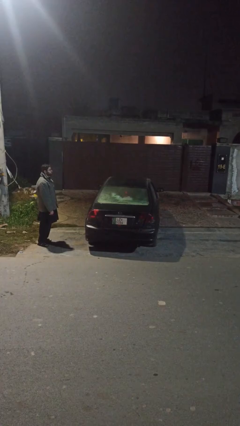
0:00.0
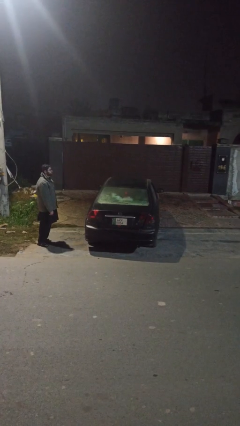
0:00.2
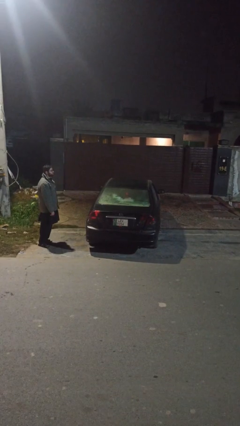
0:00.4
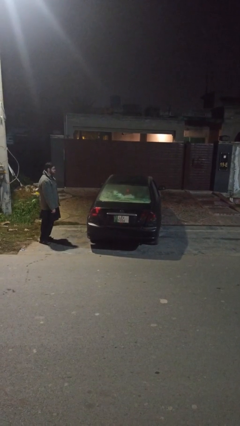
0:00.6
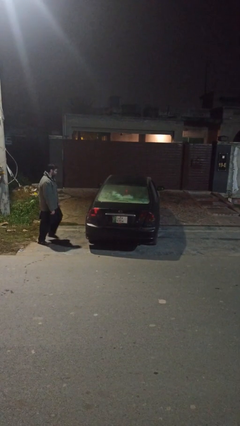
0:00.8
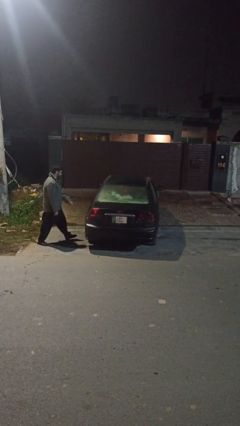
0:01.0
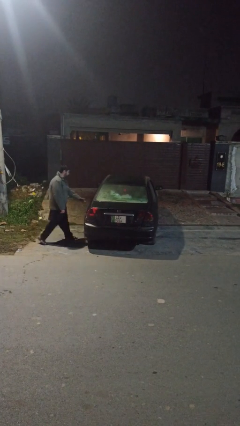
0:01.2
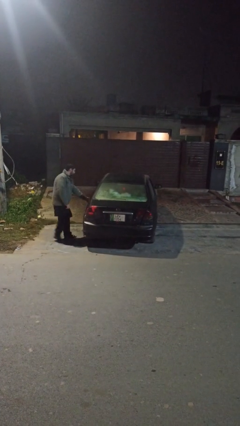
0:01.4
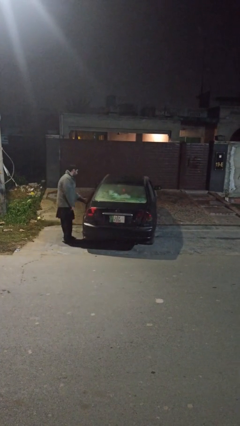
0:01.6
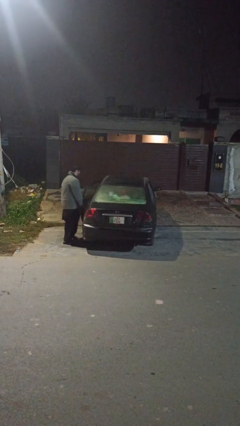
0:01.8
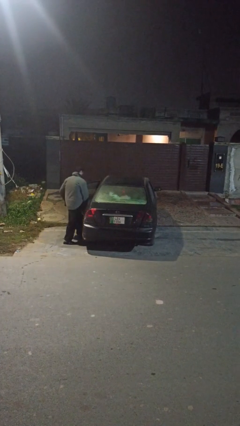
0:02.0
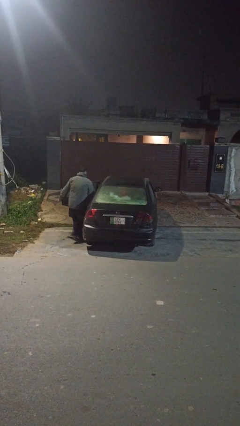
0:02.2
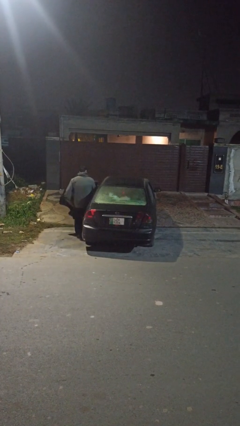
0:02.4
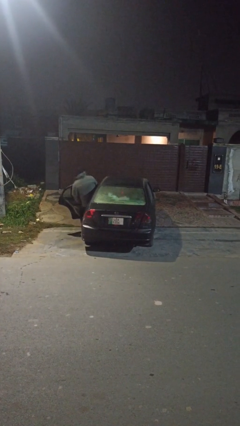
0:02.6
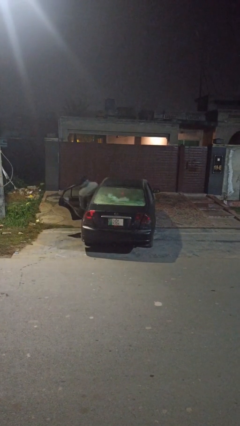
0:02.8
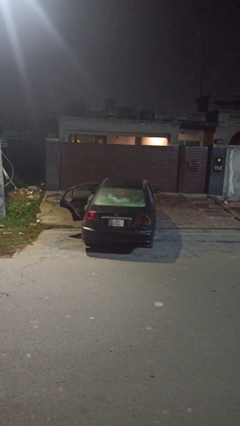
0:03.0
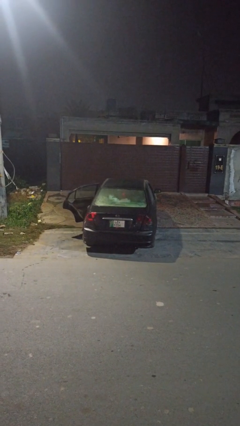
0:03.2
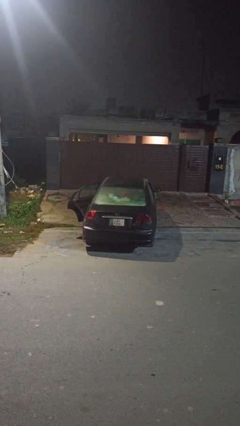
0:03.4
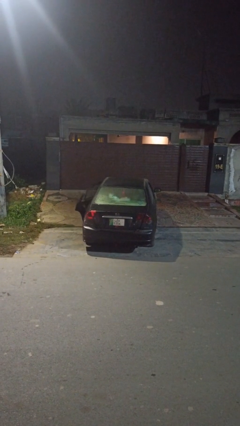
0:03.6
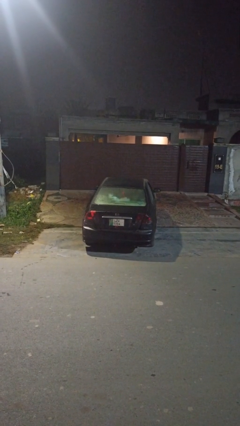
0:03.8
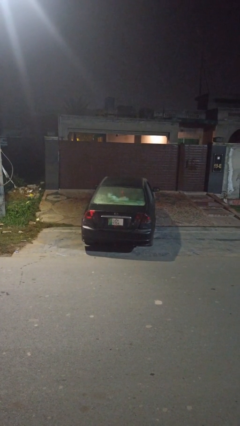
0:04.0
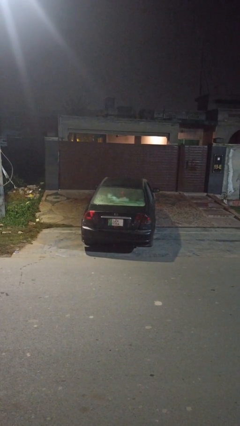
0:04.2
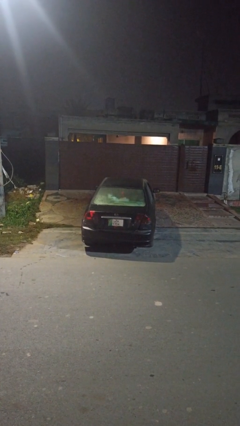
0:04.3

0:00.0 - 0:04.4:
car picks up person

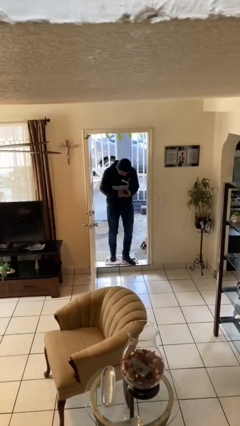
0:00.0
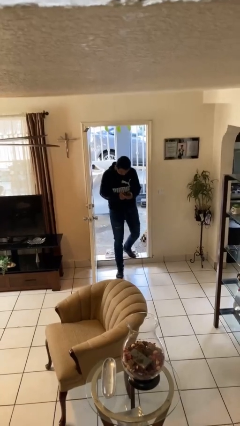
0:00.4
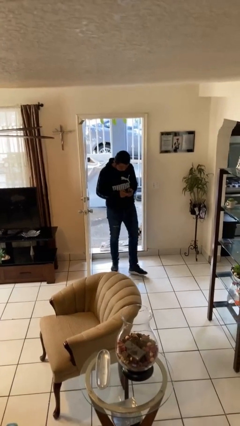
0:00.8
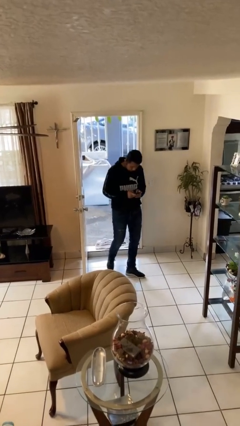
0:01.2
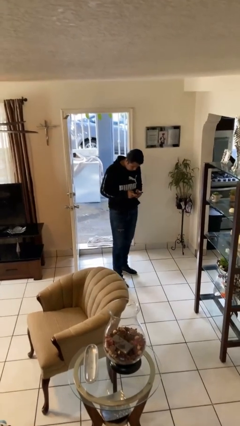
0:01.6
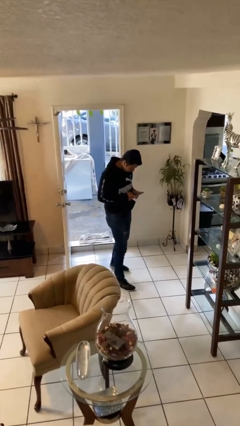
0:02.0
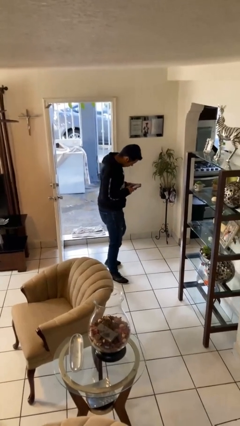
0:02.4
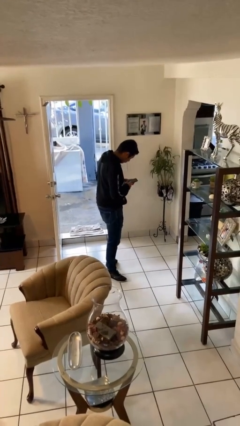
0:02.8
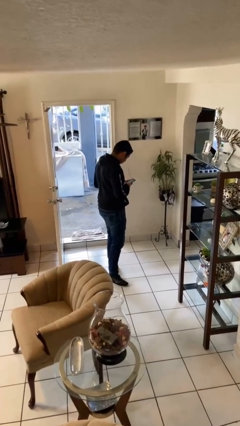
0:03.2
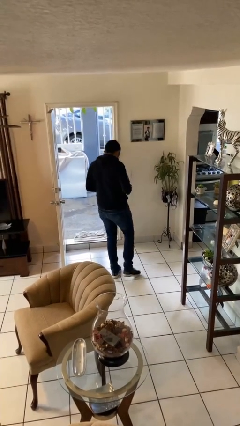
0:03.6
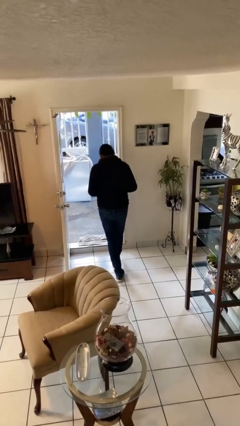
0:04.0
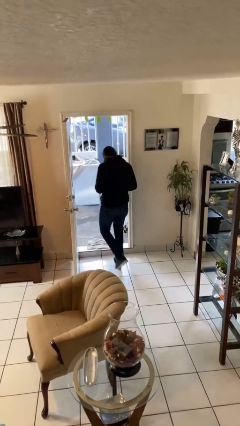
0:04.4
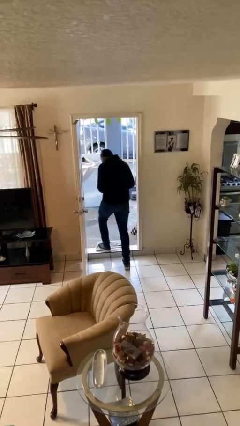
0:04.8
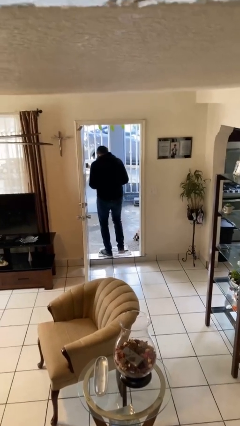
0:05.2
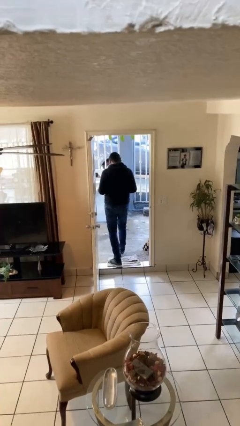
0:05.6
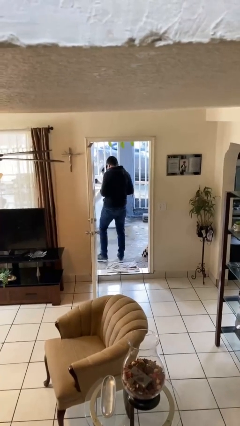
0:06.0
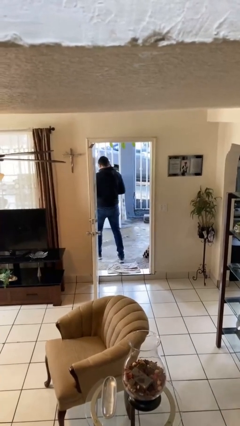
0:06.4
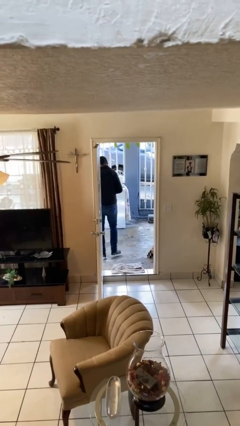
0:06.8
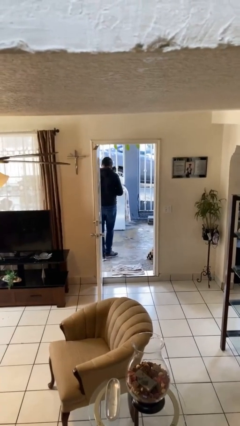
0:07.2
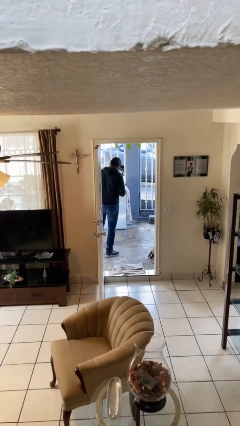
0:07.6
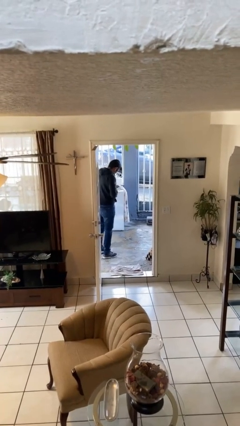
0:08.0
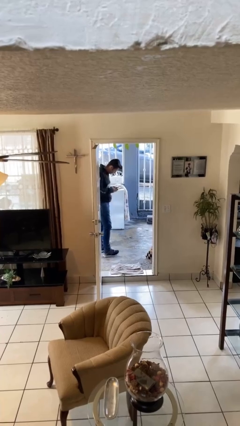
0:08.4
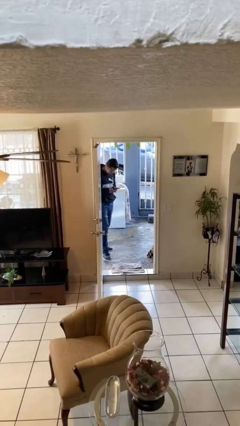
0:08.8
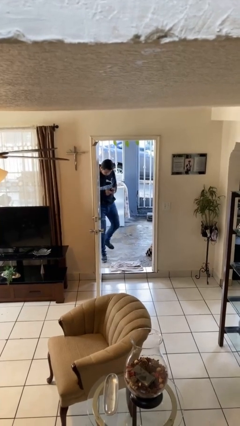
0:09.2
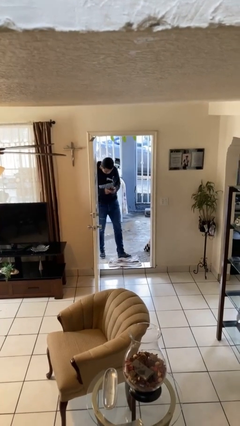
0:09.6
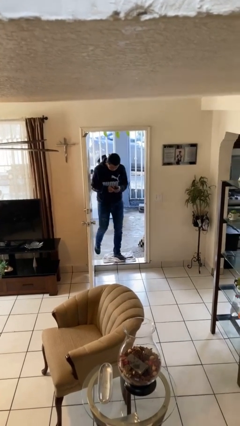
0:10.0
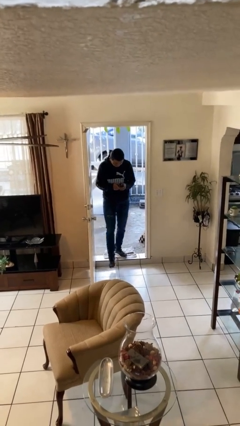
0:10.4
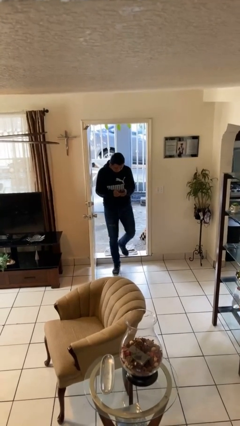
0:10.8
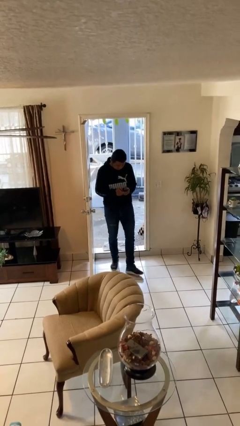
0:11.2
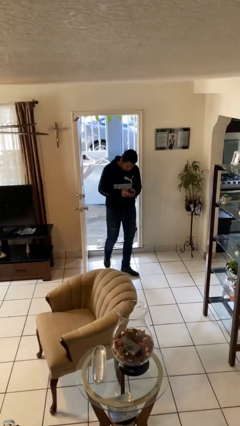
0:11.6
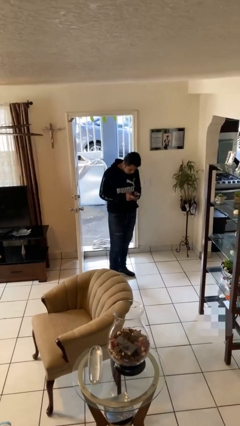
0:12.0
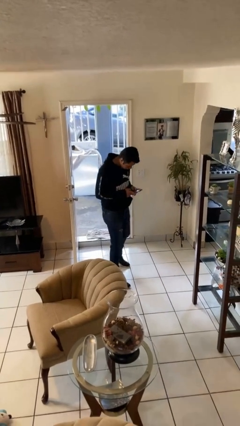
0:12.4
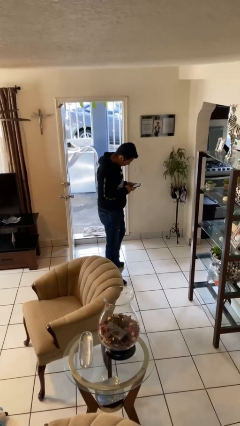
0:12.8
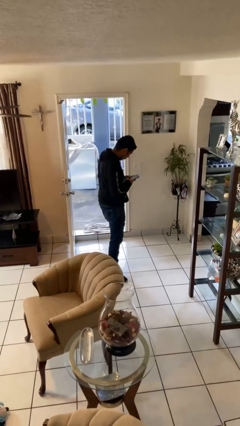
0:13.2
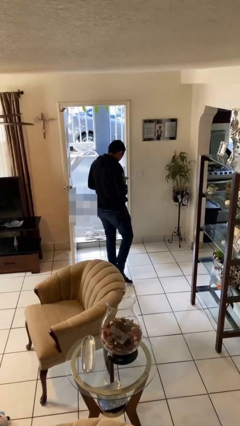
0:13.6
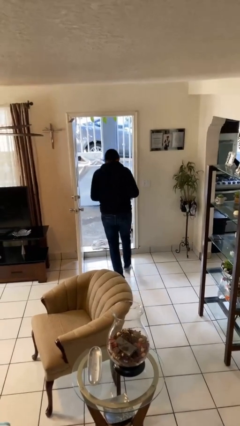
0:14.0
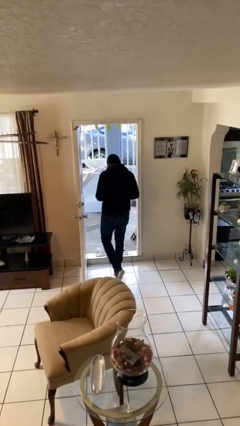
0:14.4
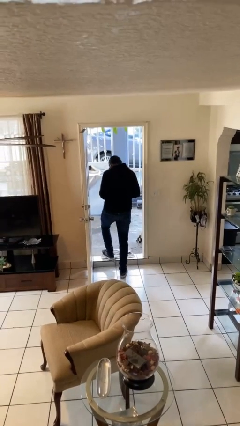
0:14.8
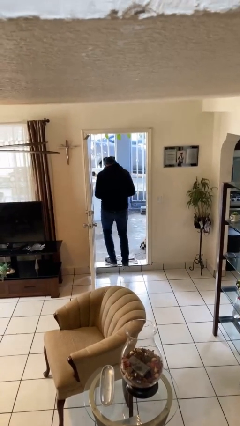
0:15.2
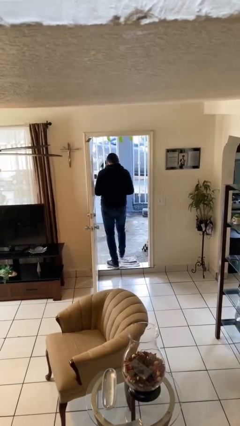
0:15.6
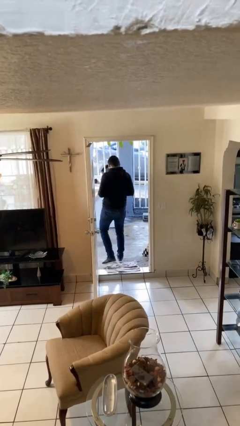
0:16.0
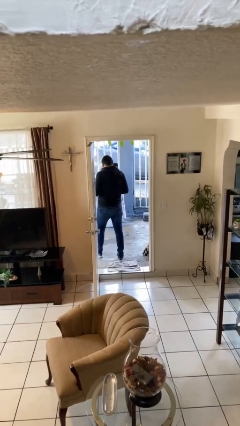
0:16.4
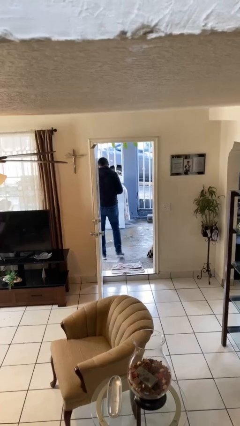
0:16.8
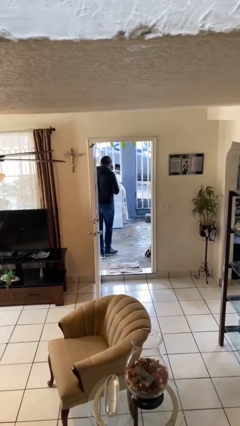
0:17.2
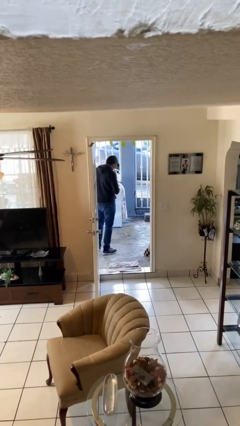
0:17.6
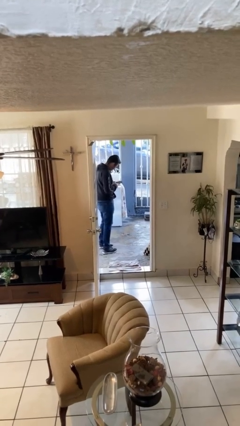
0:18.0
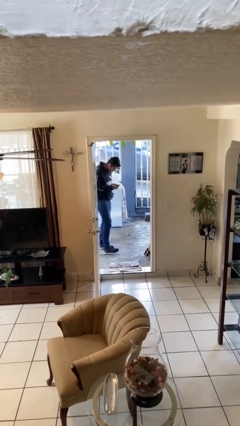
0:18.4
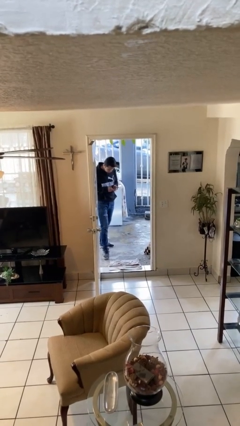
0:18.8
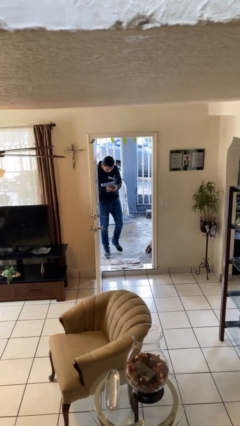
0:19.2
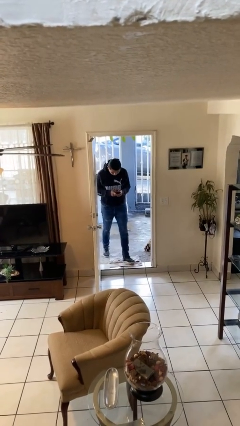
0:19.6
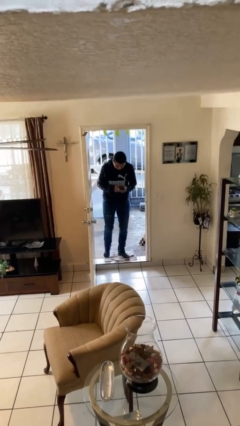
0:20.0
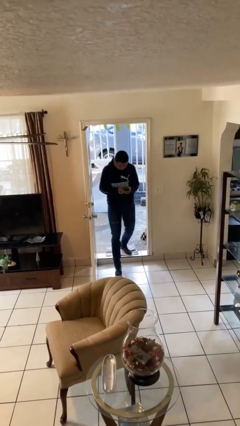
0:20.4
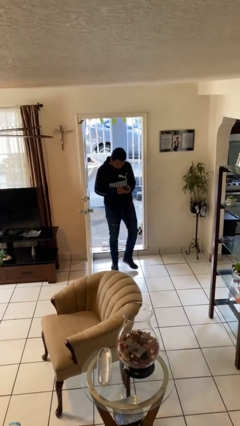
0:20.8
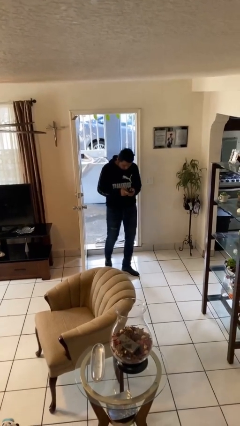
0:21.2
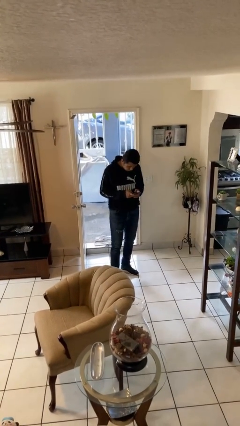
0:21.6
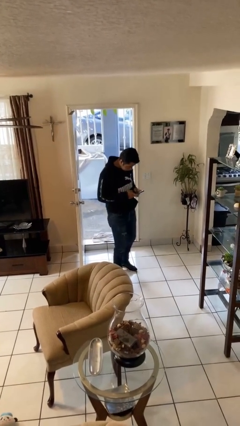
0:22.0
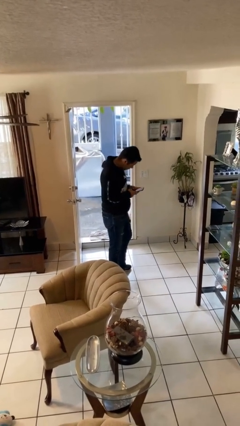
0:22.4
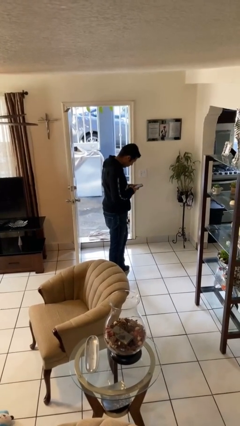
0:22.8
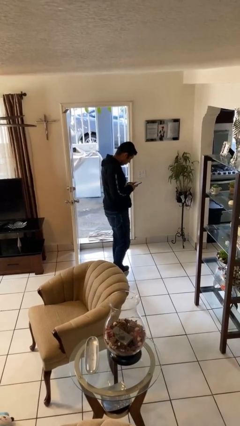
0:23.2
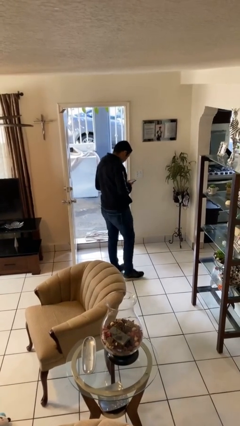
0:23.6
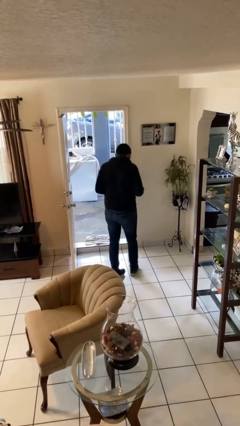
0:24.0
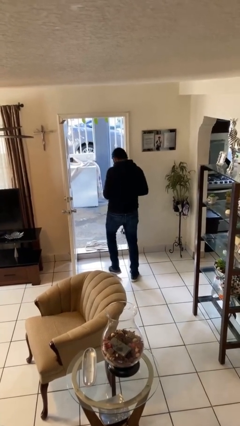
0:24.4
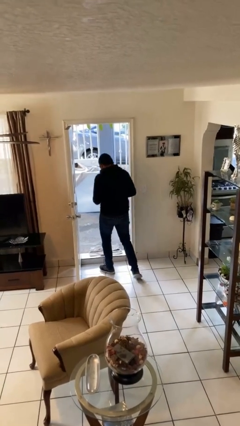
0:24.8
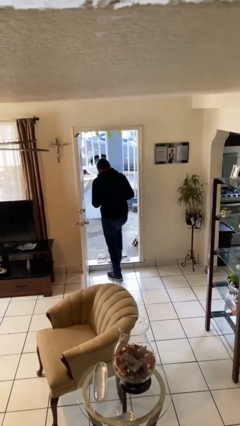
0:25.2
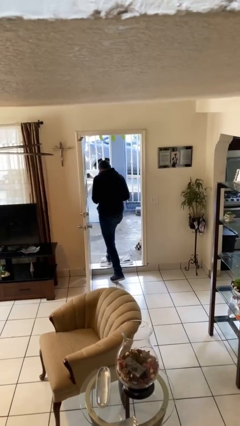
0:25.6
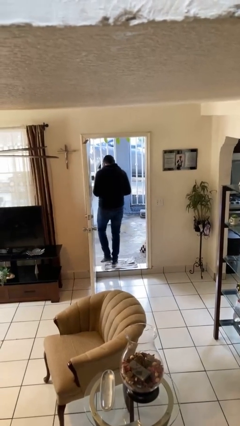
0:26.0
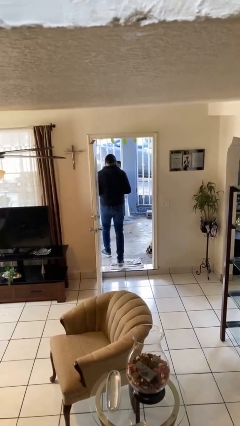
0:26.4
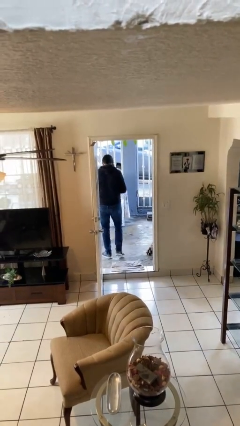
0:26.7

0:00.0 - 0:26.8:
person texts on phone

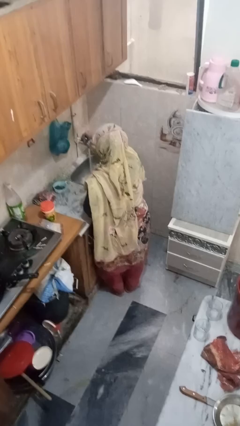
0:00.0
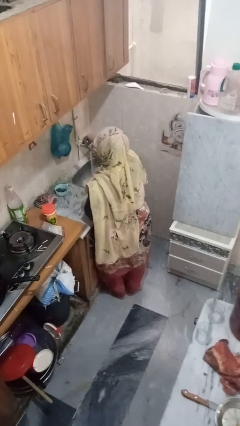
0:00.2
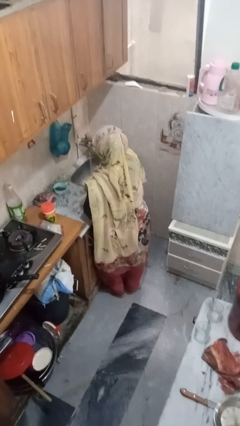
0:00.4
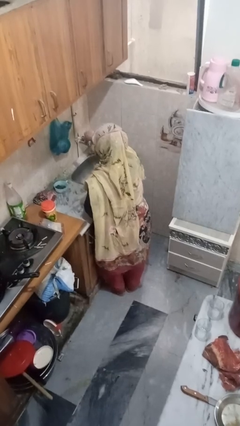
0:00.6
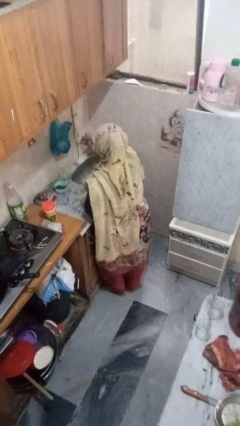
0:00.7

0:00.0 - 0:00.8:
person turns off faucet
